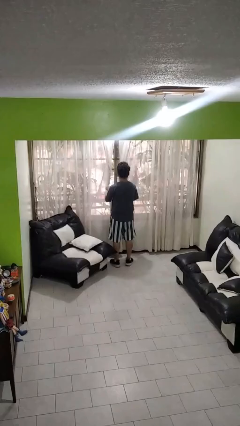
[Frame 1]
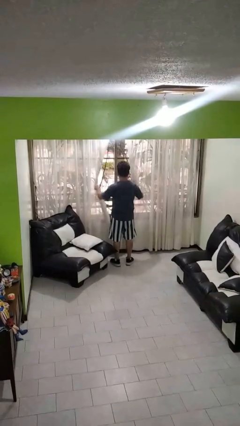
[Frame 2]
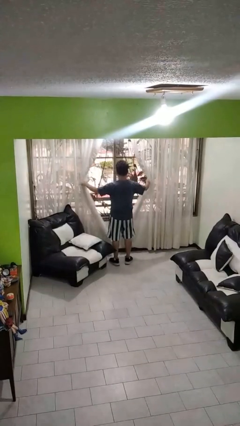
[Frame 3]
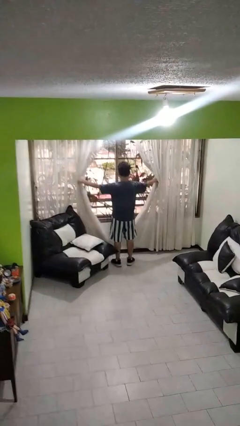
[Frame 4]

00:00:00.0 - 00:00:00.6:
person opens curtains

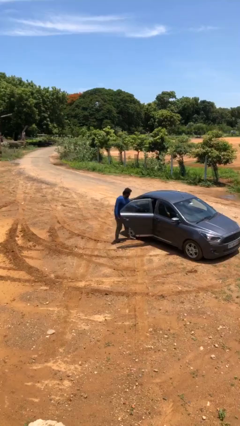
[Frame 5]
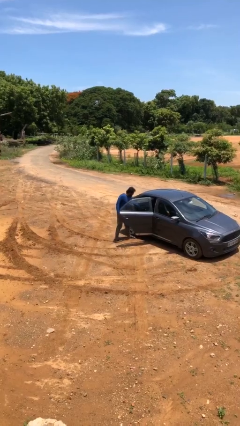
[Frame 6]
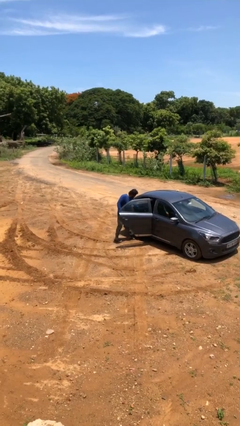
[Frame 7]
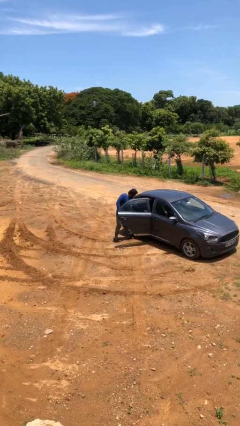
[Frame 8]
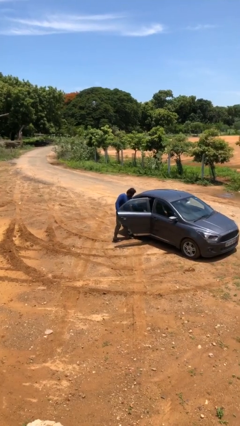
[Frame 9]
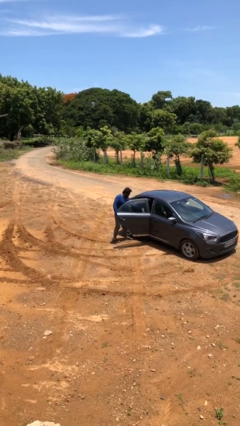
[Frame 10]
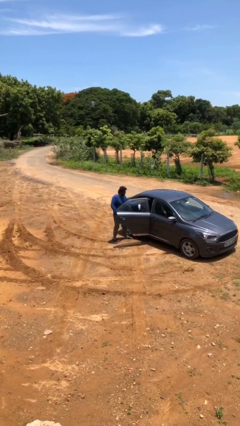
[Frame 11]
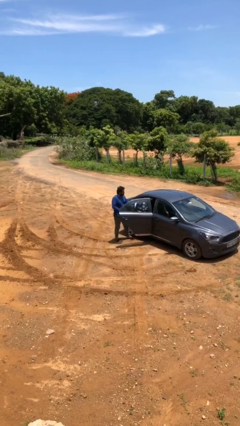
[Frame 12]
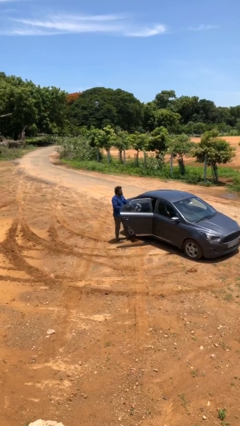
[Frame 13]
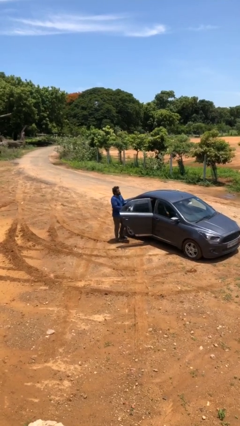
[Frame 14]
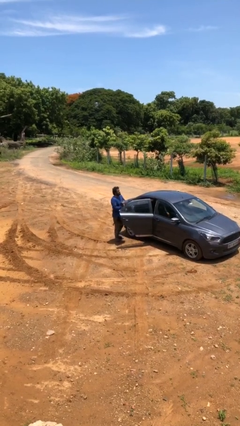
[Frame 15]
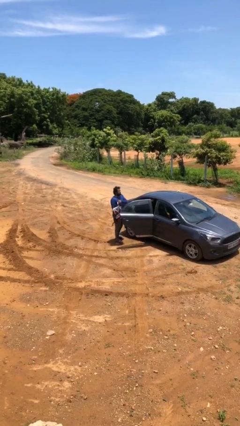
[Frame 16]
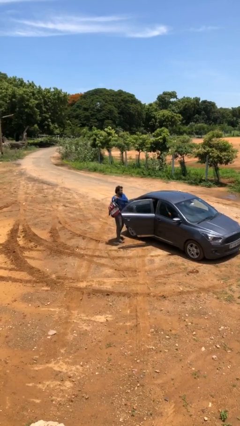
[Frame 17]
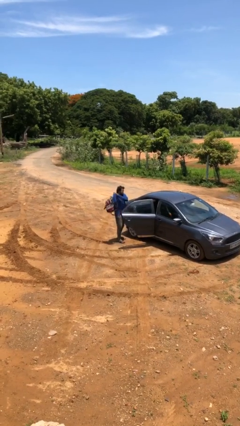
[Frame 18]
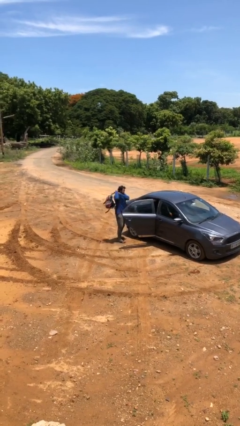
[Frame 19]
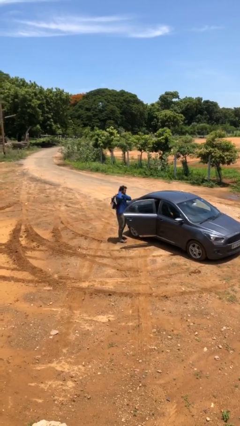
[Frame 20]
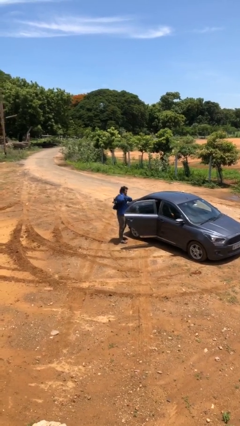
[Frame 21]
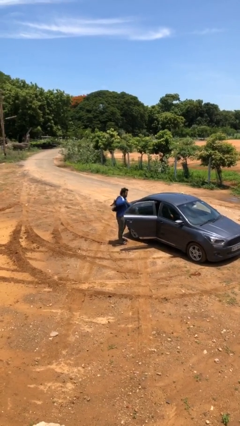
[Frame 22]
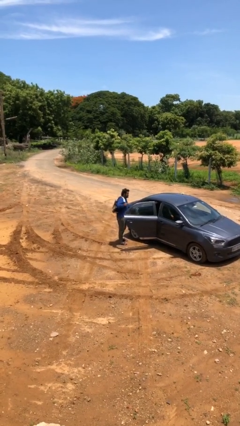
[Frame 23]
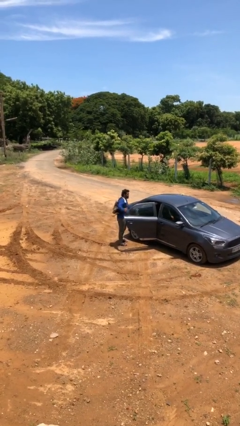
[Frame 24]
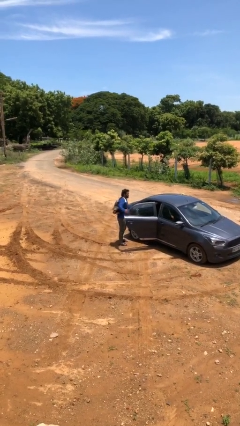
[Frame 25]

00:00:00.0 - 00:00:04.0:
person unloads car

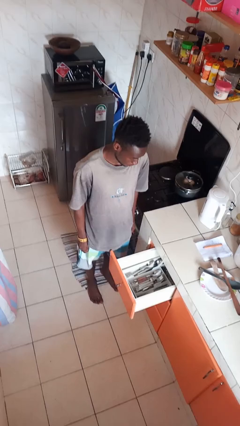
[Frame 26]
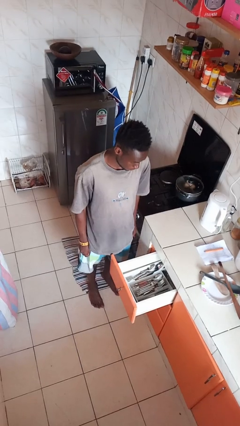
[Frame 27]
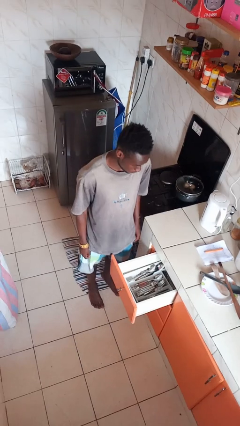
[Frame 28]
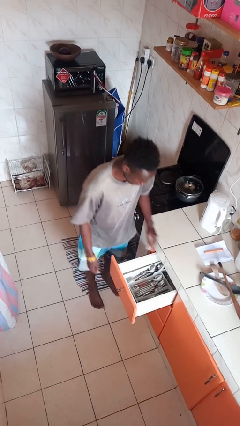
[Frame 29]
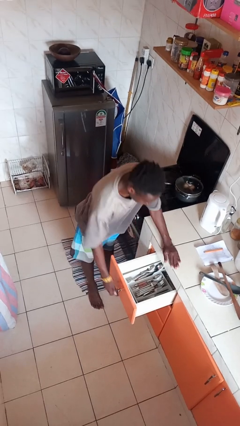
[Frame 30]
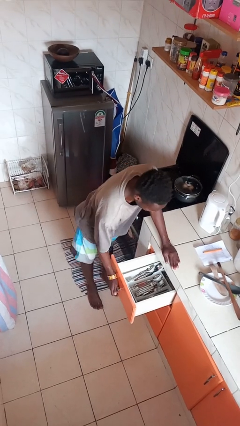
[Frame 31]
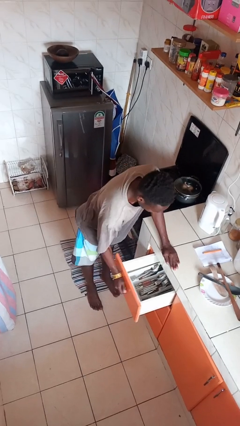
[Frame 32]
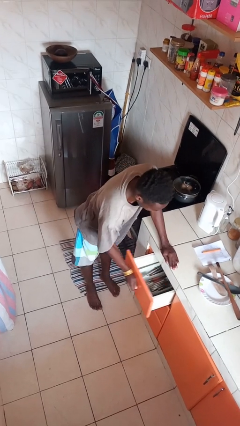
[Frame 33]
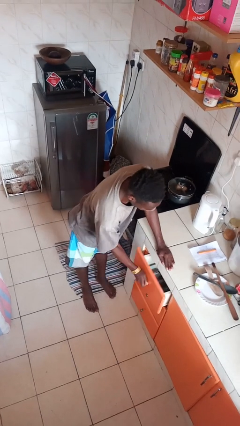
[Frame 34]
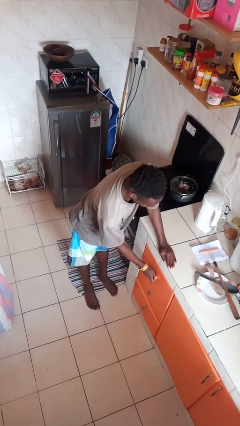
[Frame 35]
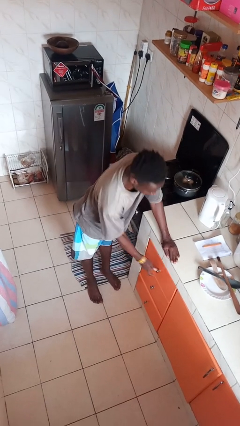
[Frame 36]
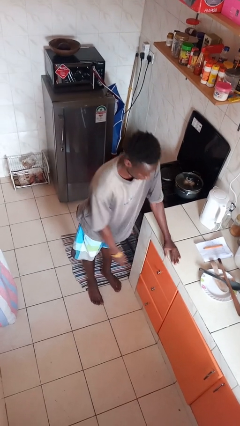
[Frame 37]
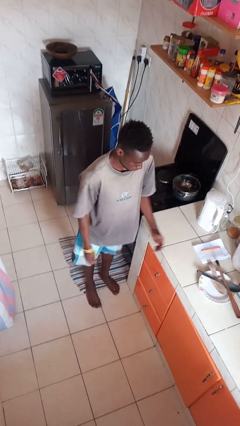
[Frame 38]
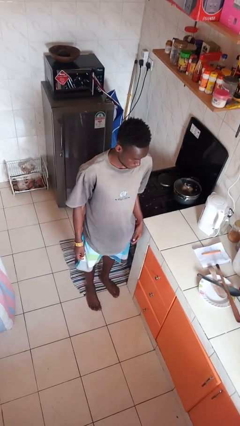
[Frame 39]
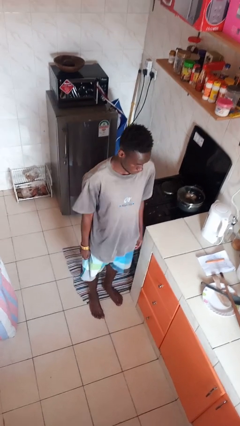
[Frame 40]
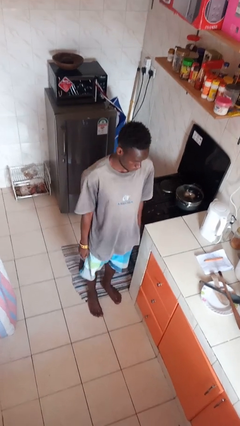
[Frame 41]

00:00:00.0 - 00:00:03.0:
person closes kitchen drawer

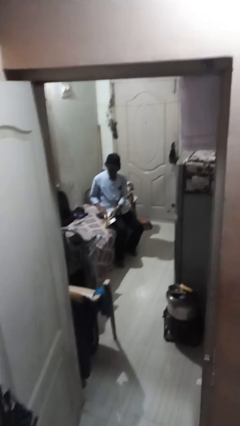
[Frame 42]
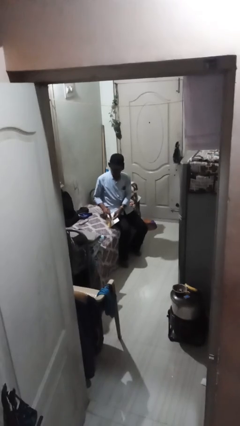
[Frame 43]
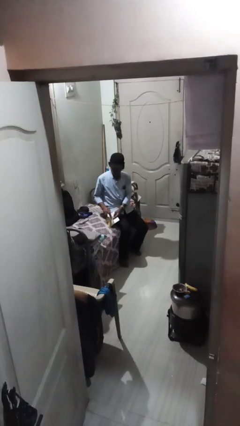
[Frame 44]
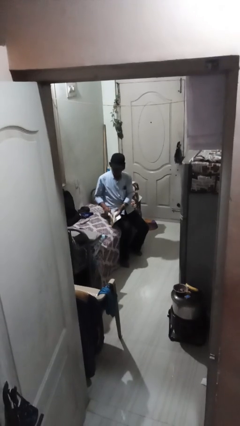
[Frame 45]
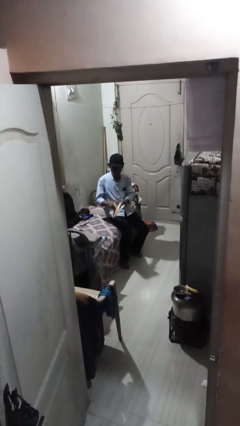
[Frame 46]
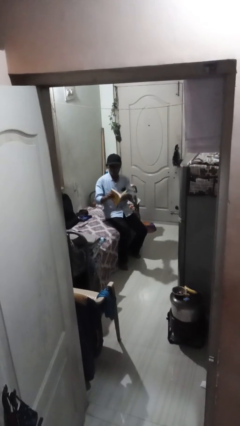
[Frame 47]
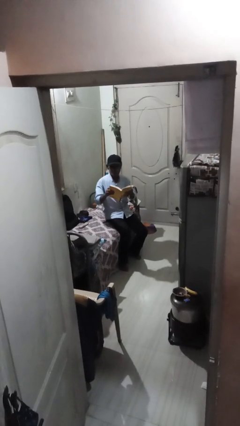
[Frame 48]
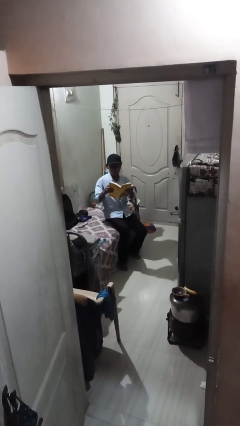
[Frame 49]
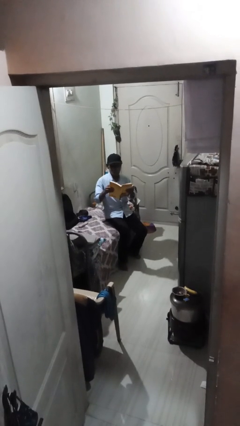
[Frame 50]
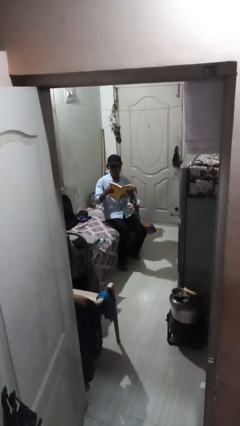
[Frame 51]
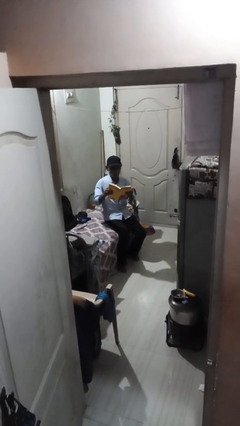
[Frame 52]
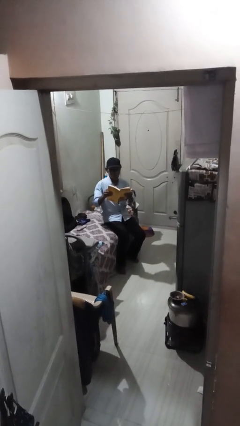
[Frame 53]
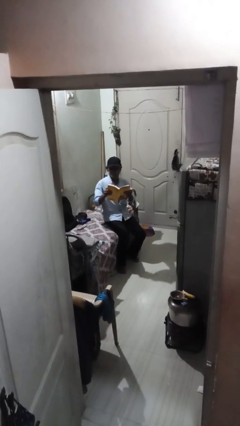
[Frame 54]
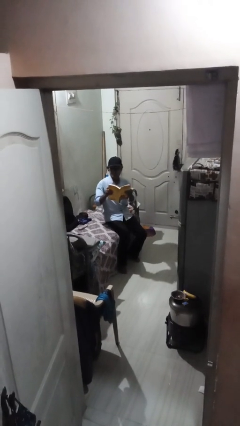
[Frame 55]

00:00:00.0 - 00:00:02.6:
person reads book

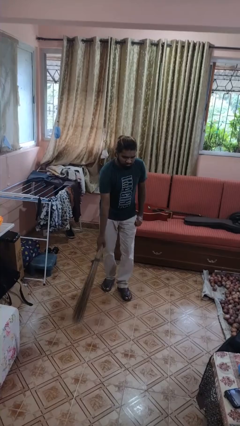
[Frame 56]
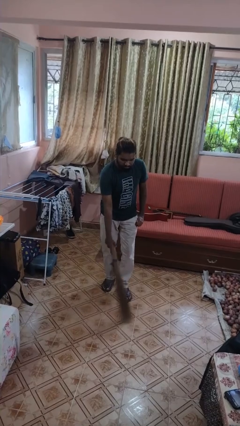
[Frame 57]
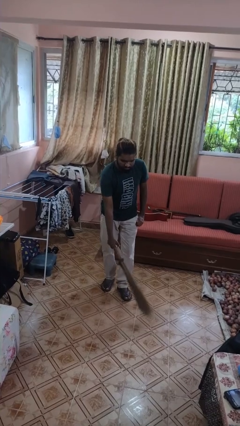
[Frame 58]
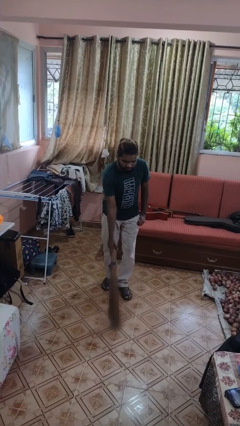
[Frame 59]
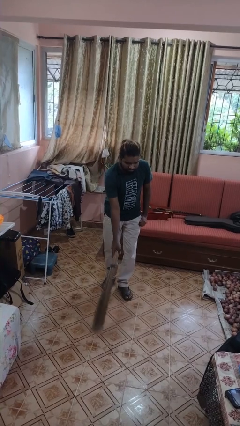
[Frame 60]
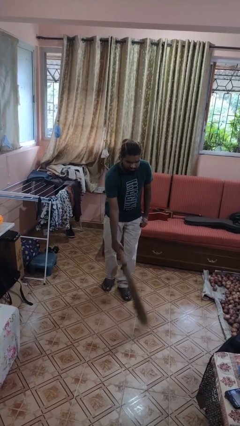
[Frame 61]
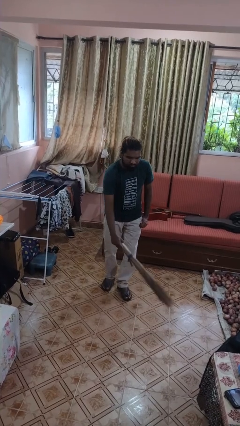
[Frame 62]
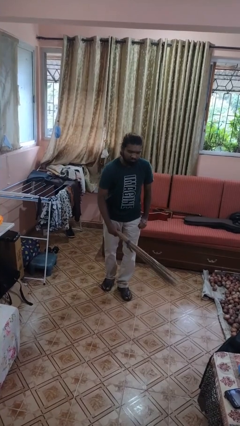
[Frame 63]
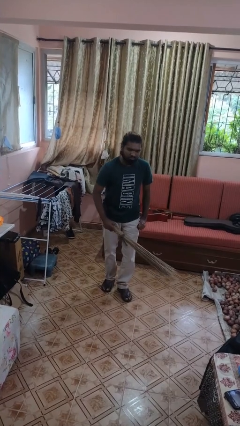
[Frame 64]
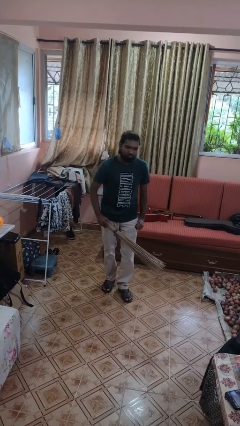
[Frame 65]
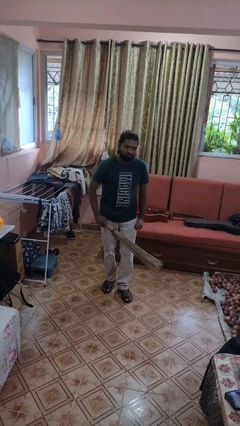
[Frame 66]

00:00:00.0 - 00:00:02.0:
person sweeps floor

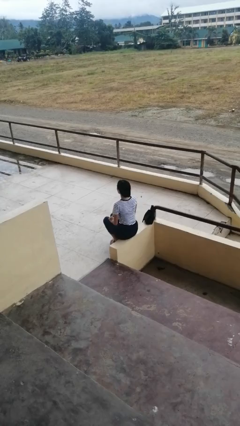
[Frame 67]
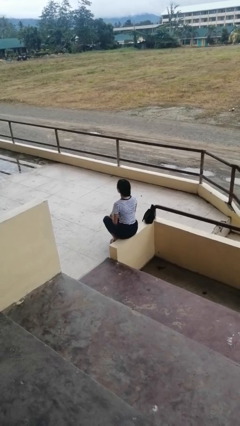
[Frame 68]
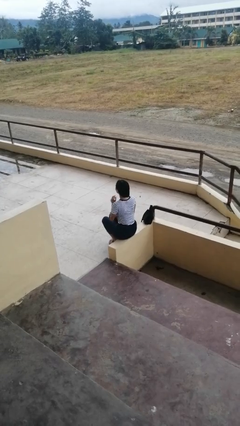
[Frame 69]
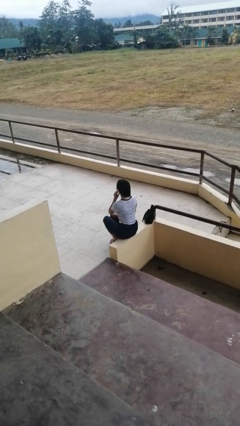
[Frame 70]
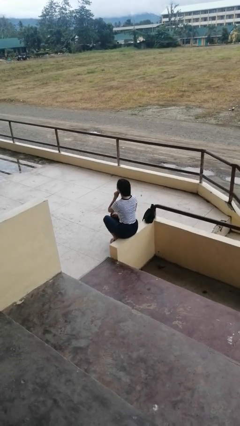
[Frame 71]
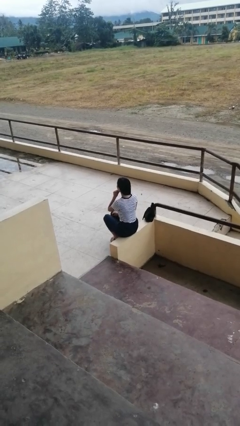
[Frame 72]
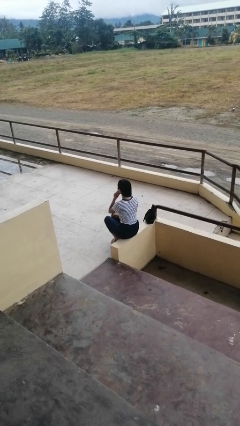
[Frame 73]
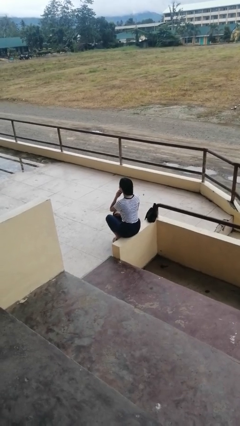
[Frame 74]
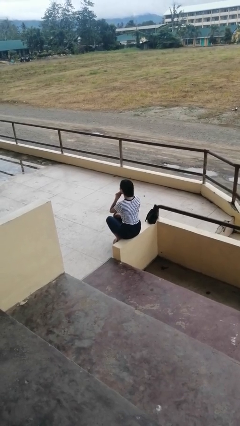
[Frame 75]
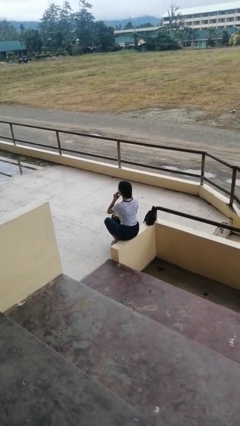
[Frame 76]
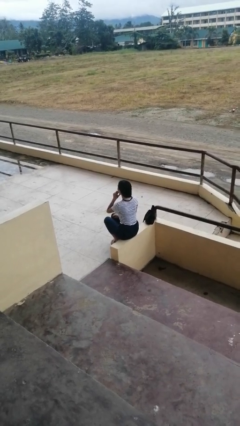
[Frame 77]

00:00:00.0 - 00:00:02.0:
person strokes chin

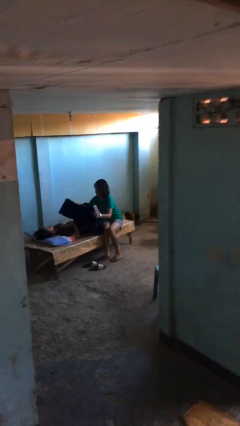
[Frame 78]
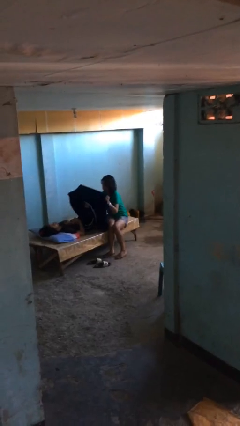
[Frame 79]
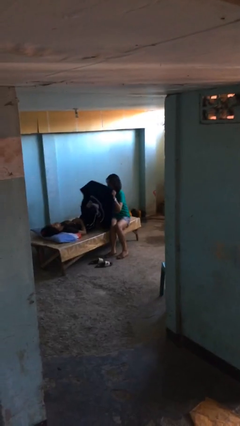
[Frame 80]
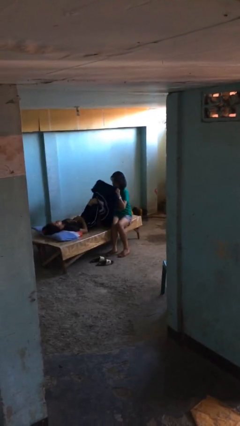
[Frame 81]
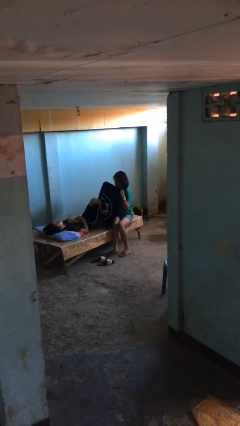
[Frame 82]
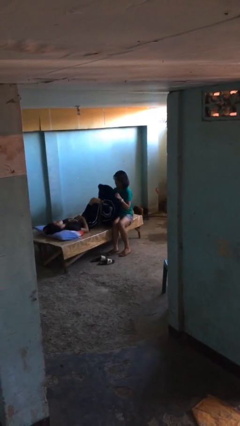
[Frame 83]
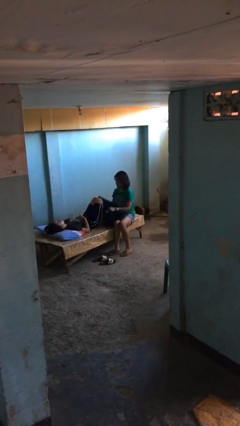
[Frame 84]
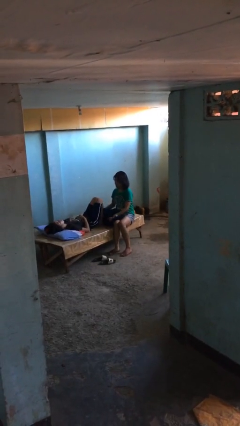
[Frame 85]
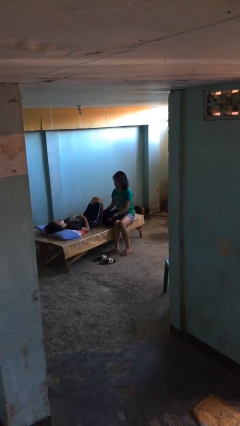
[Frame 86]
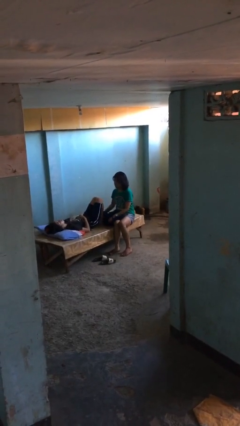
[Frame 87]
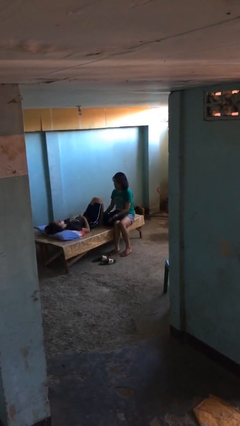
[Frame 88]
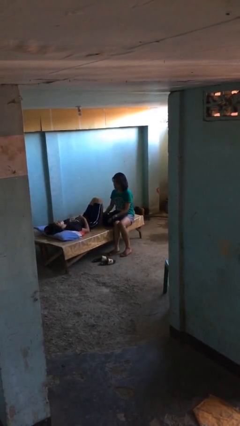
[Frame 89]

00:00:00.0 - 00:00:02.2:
person uncovers friend with blanket

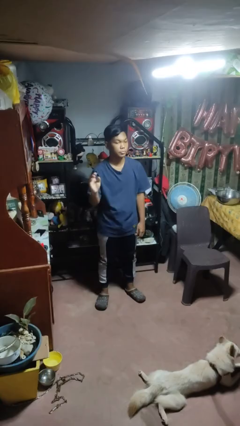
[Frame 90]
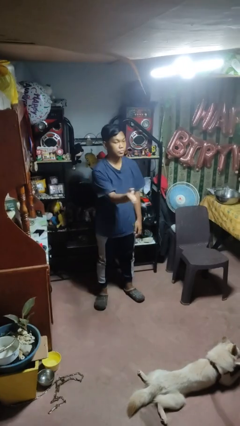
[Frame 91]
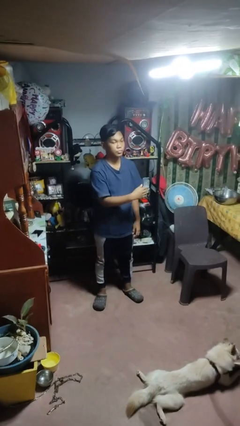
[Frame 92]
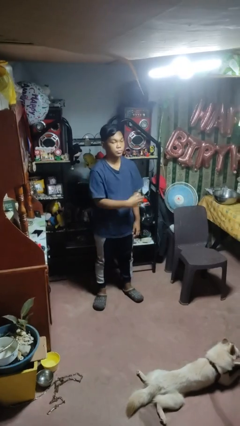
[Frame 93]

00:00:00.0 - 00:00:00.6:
person gestures swipe left
